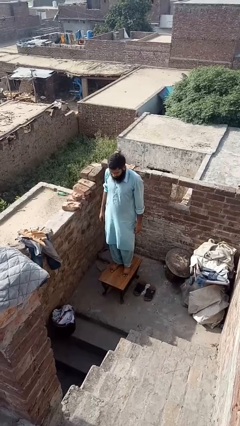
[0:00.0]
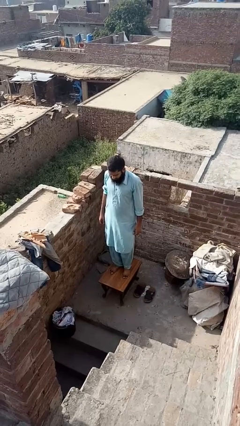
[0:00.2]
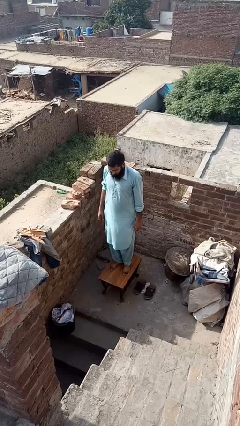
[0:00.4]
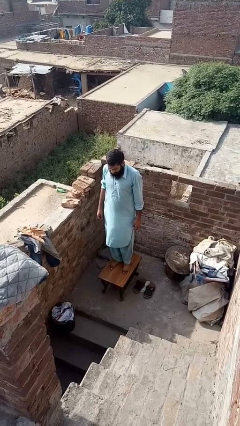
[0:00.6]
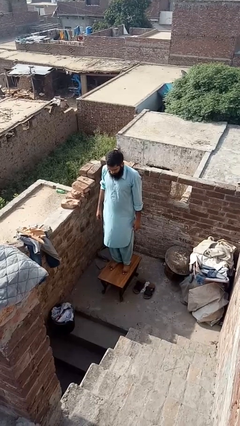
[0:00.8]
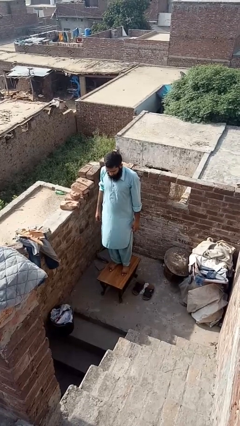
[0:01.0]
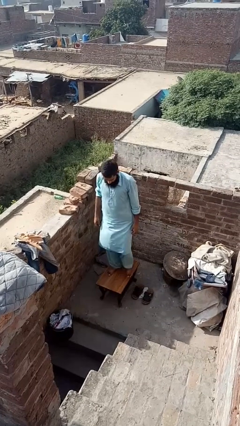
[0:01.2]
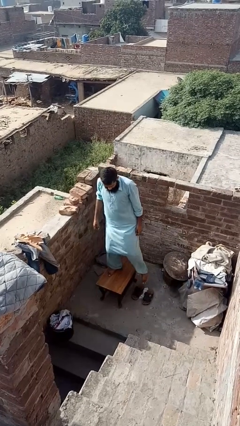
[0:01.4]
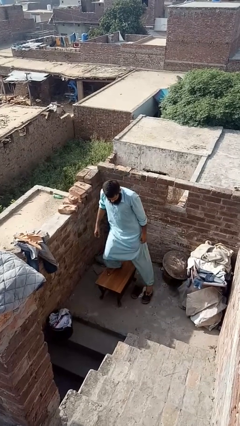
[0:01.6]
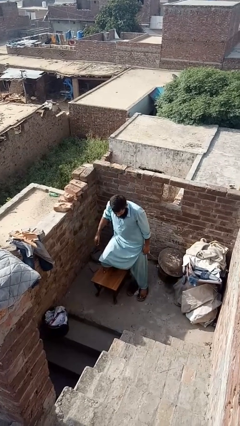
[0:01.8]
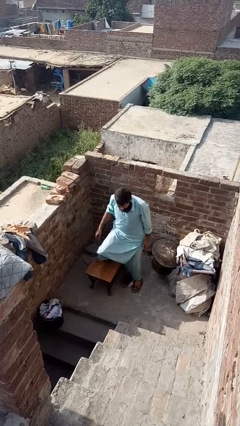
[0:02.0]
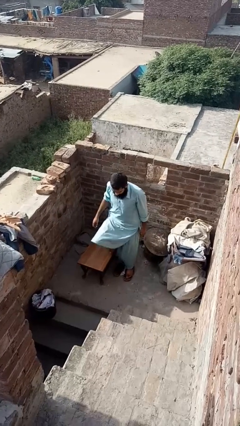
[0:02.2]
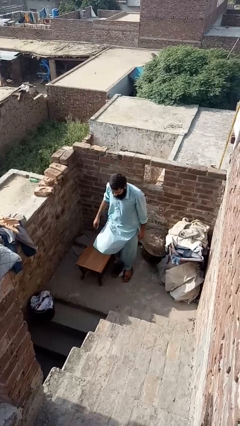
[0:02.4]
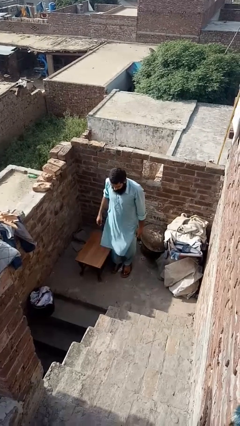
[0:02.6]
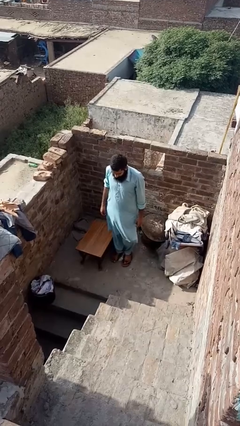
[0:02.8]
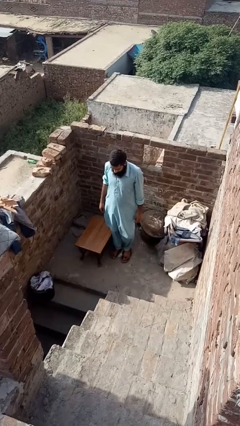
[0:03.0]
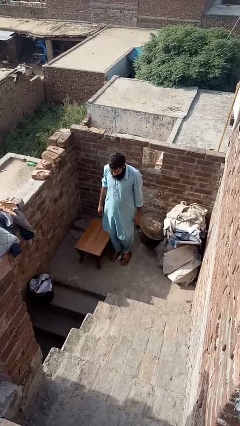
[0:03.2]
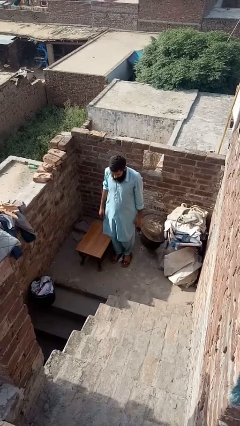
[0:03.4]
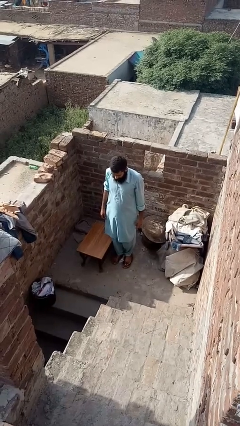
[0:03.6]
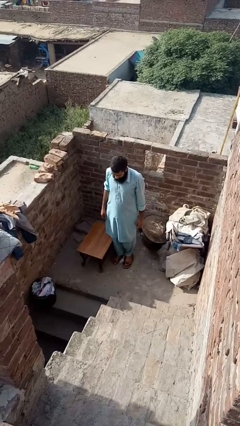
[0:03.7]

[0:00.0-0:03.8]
person climbs off table

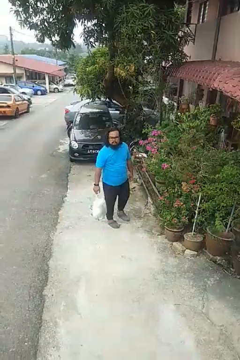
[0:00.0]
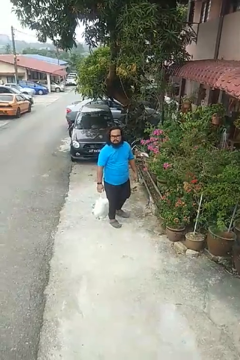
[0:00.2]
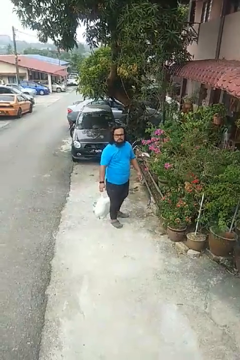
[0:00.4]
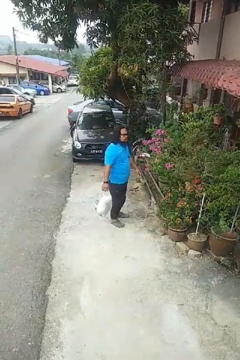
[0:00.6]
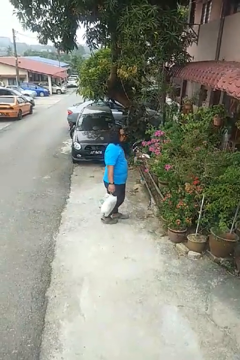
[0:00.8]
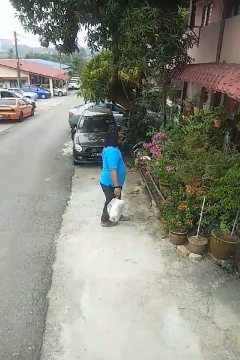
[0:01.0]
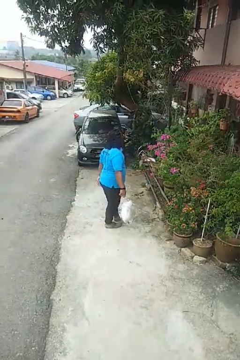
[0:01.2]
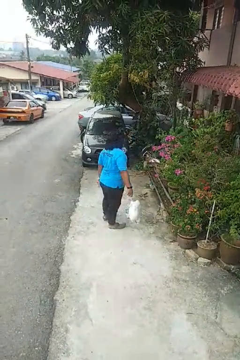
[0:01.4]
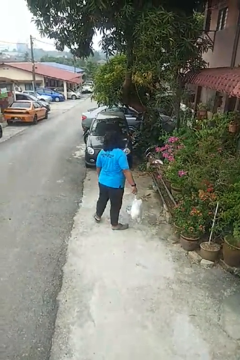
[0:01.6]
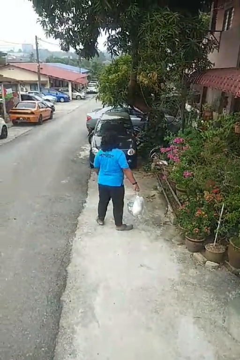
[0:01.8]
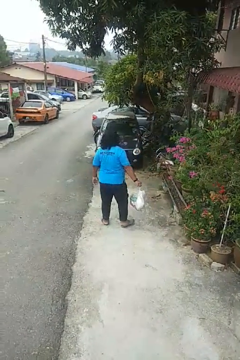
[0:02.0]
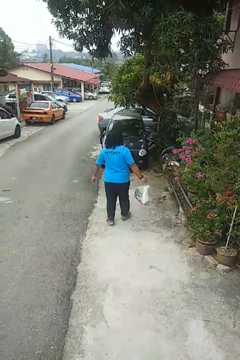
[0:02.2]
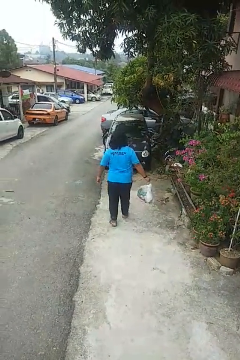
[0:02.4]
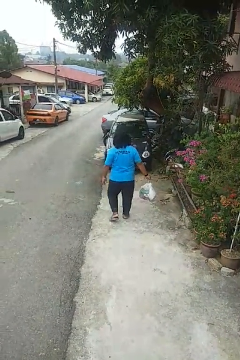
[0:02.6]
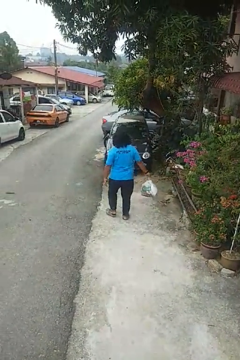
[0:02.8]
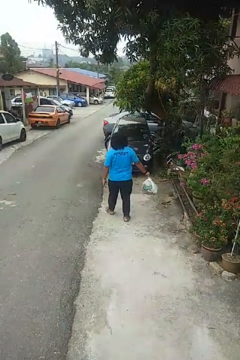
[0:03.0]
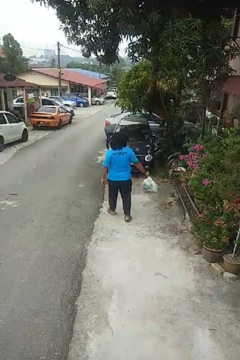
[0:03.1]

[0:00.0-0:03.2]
person carries groceries

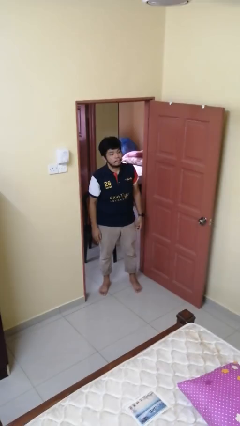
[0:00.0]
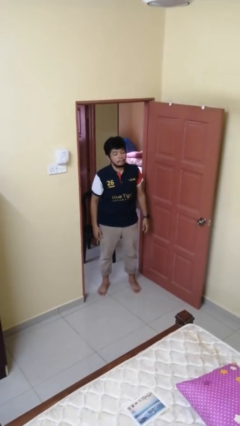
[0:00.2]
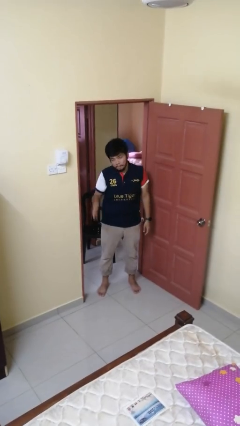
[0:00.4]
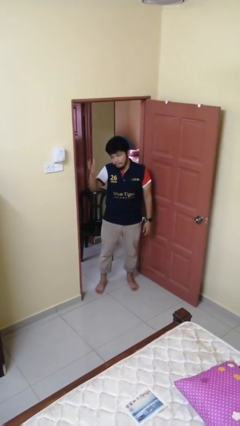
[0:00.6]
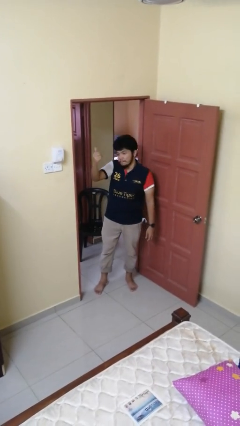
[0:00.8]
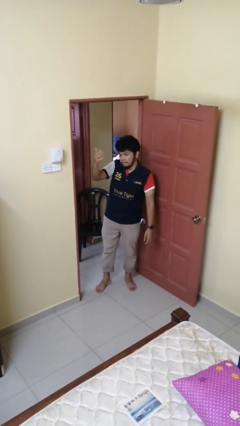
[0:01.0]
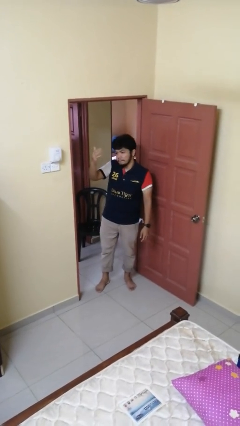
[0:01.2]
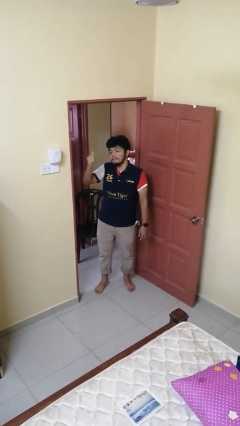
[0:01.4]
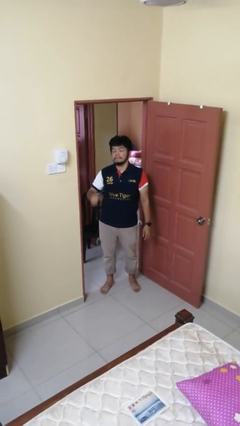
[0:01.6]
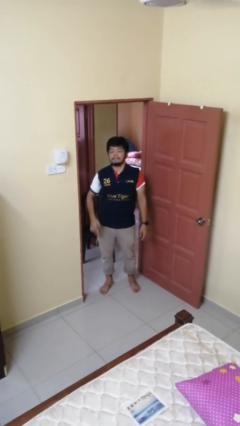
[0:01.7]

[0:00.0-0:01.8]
person gestures come here

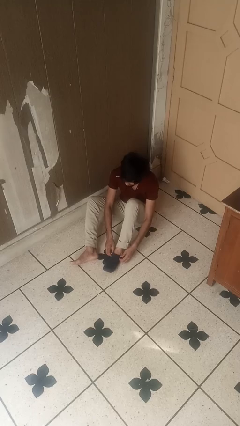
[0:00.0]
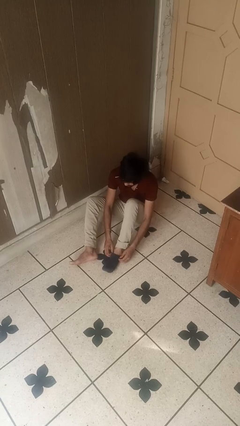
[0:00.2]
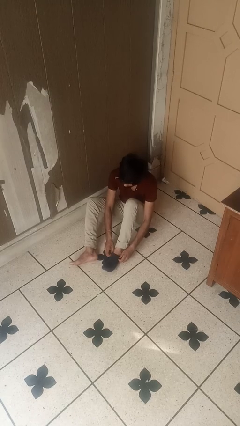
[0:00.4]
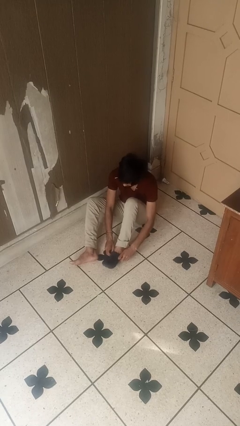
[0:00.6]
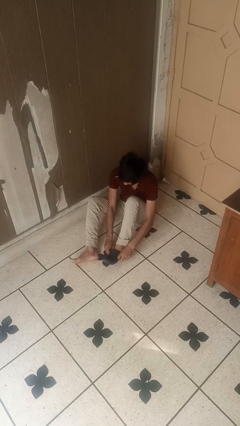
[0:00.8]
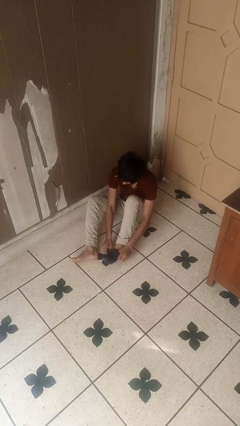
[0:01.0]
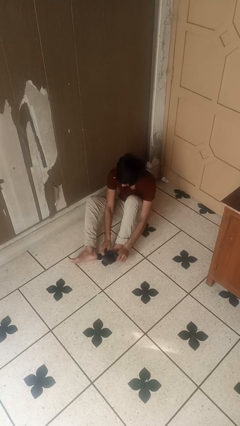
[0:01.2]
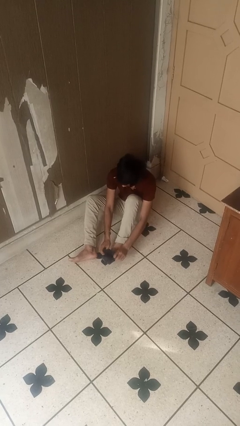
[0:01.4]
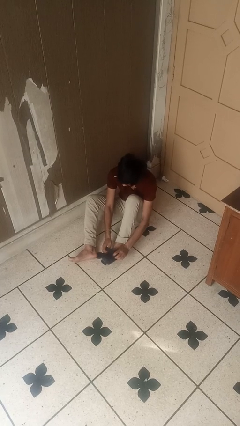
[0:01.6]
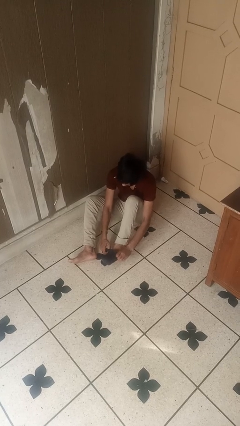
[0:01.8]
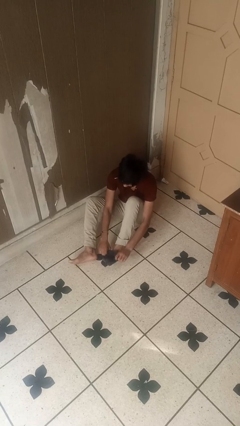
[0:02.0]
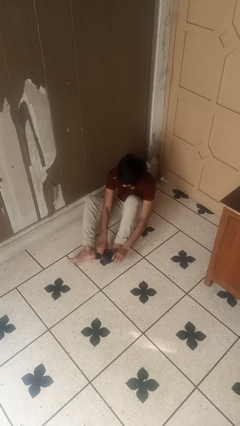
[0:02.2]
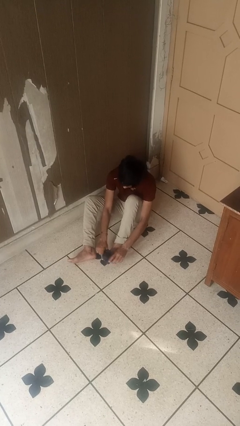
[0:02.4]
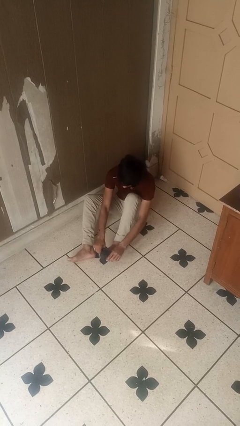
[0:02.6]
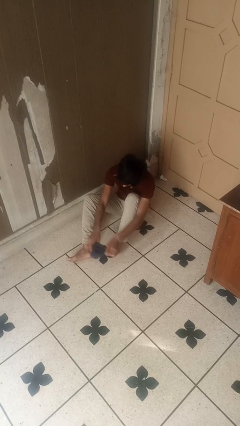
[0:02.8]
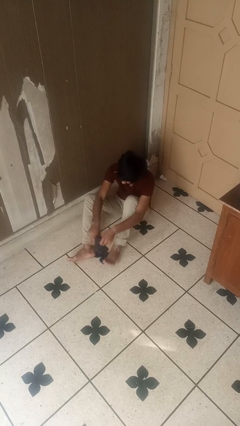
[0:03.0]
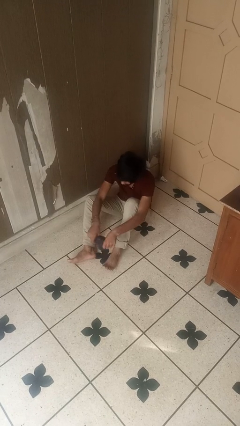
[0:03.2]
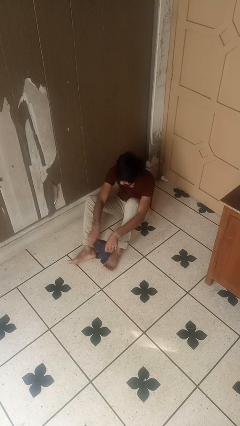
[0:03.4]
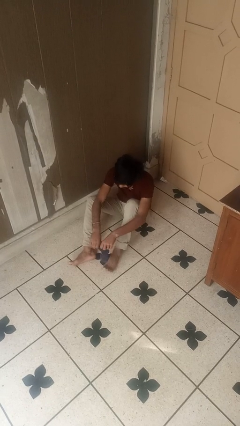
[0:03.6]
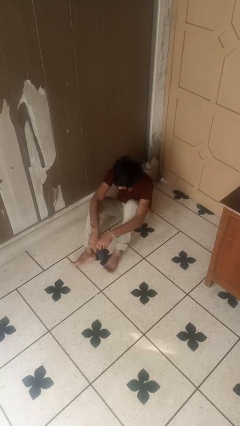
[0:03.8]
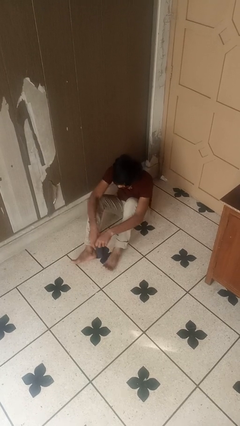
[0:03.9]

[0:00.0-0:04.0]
person takes off socks

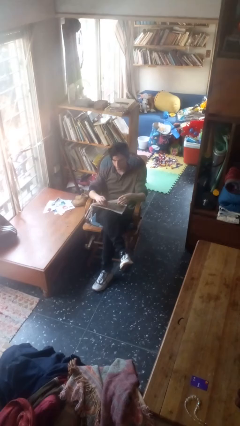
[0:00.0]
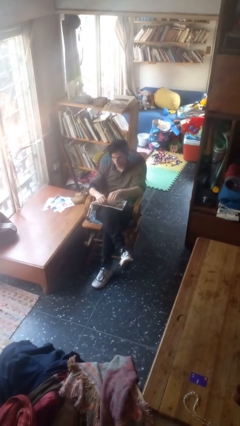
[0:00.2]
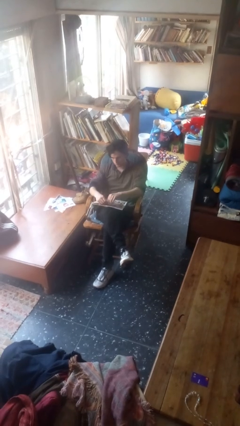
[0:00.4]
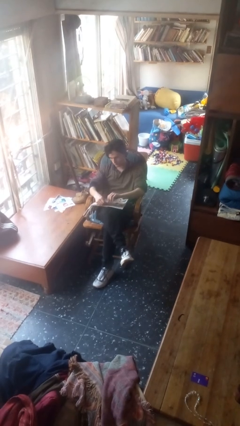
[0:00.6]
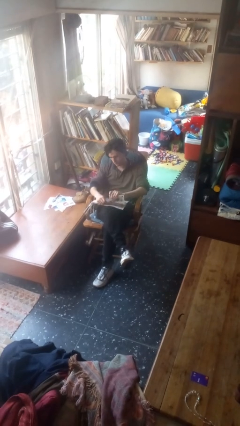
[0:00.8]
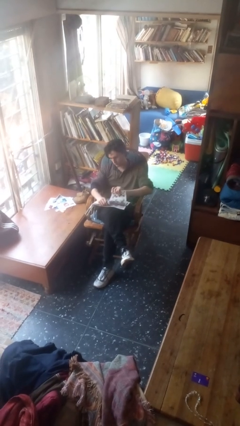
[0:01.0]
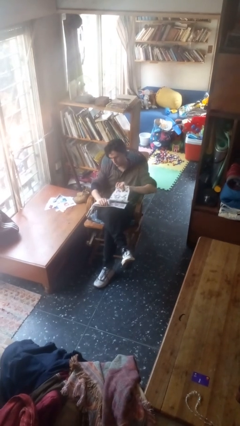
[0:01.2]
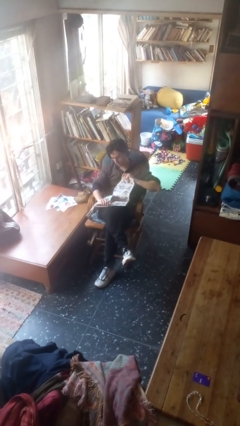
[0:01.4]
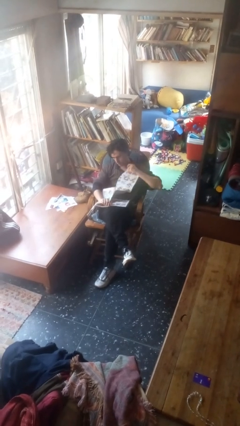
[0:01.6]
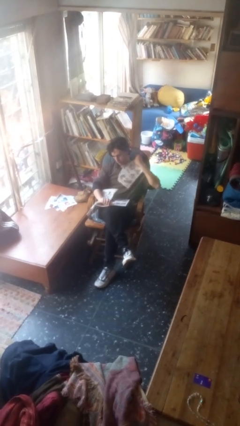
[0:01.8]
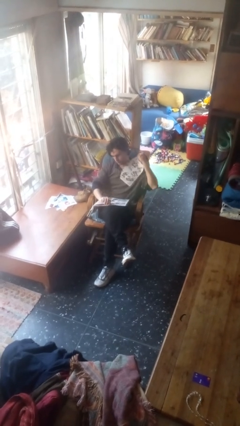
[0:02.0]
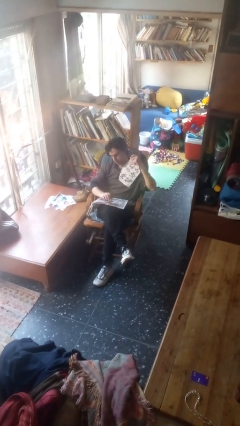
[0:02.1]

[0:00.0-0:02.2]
person tears paper

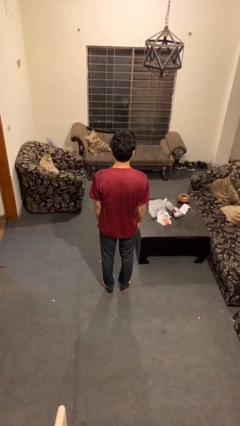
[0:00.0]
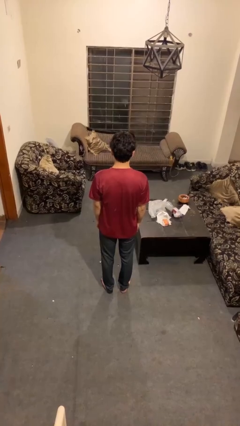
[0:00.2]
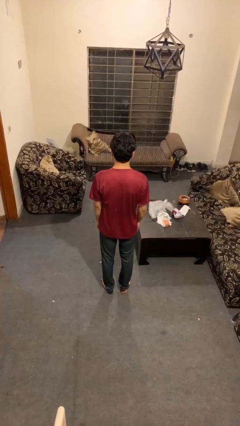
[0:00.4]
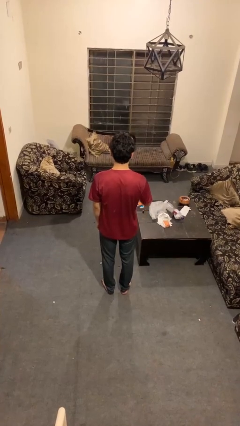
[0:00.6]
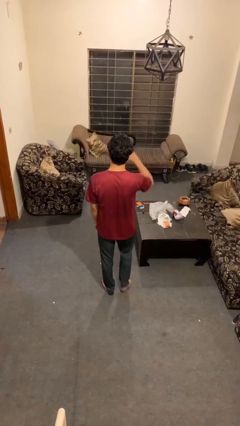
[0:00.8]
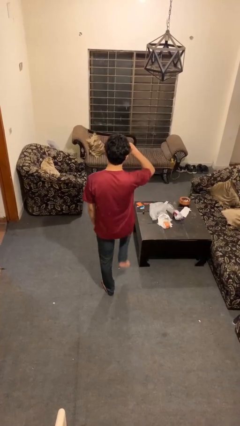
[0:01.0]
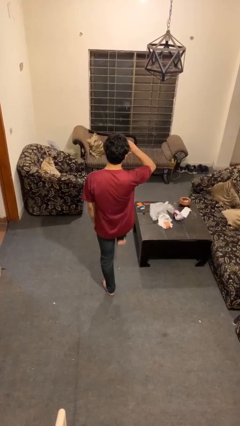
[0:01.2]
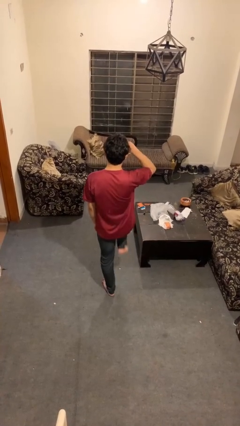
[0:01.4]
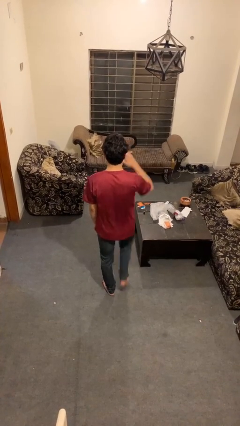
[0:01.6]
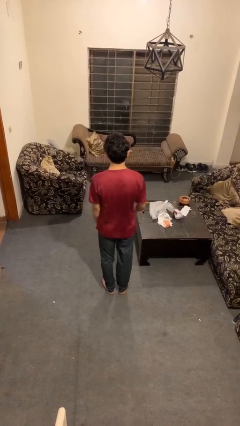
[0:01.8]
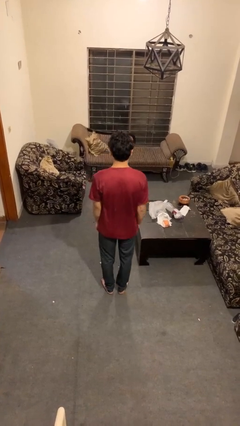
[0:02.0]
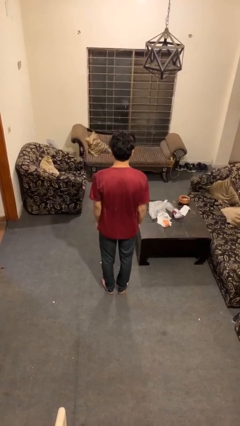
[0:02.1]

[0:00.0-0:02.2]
person salutes

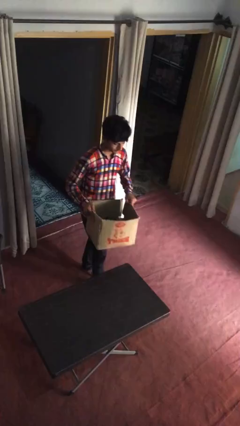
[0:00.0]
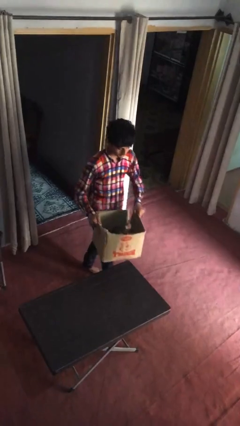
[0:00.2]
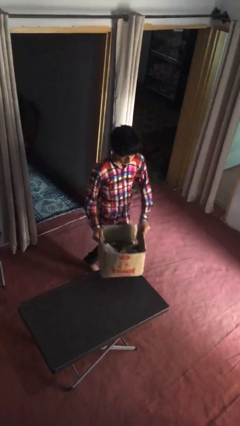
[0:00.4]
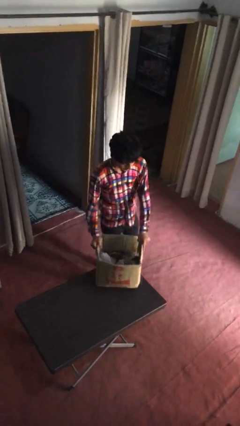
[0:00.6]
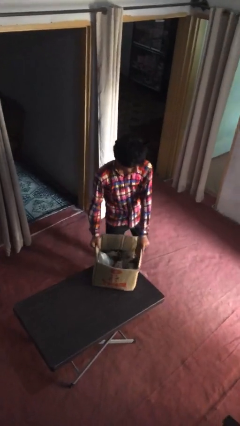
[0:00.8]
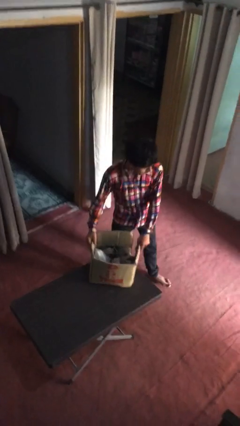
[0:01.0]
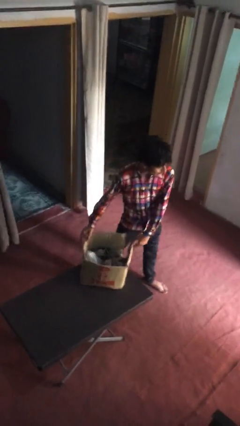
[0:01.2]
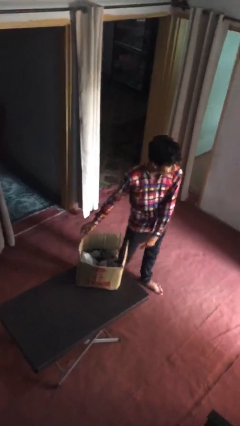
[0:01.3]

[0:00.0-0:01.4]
person puts down object on table
